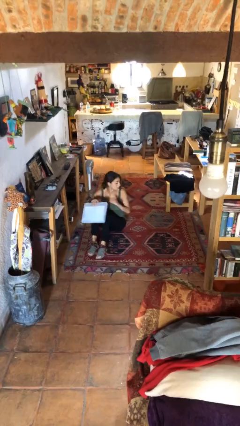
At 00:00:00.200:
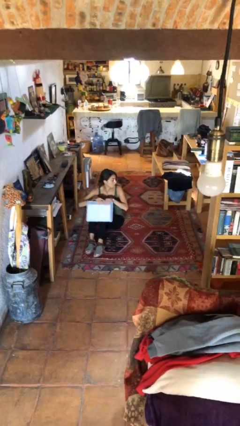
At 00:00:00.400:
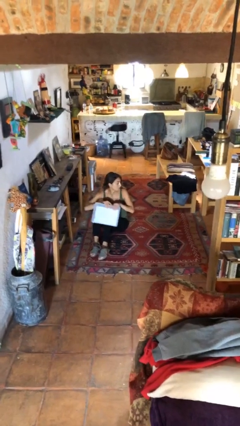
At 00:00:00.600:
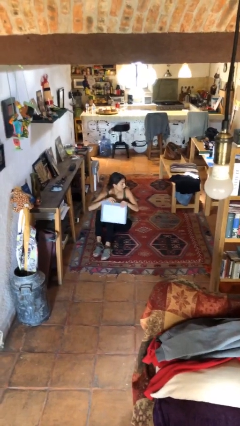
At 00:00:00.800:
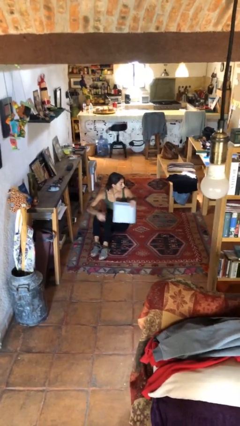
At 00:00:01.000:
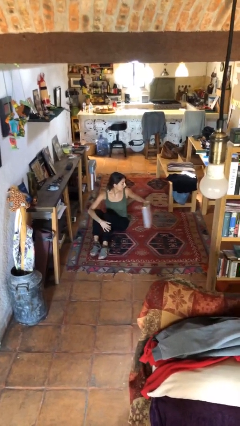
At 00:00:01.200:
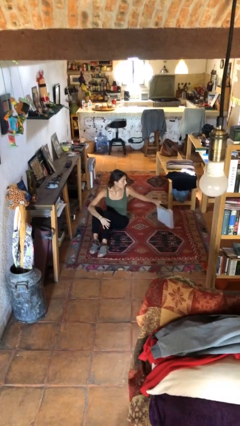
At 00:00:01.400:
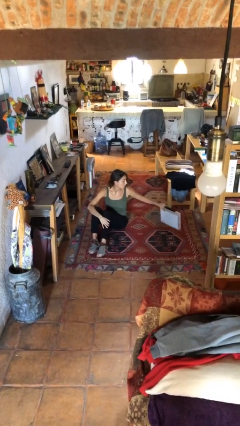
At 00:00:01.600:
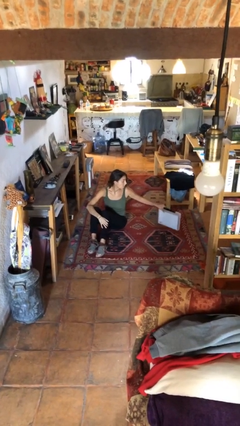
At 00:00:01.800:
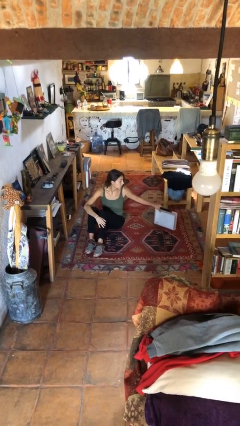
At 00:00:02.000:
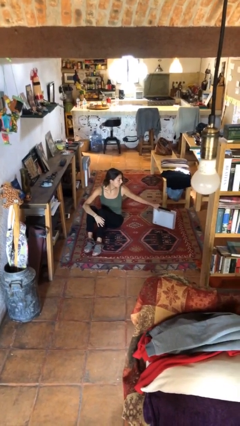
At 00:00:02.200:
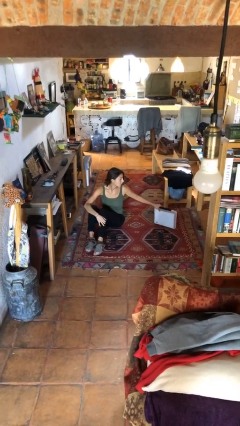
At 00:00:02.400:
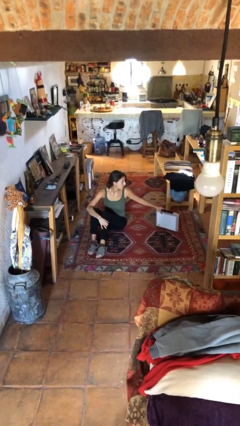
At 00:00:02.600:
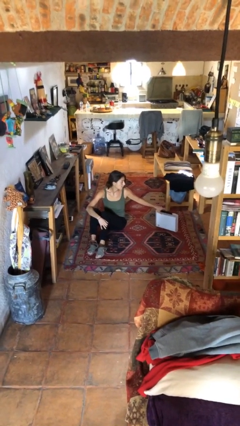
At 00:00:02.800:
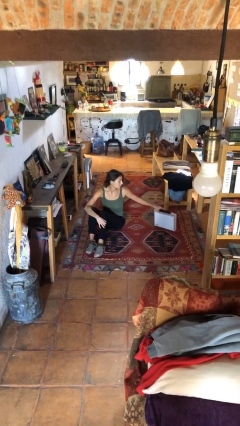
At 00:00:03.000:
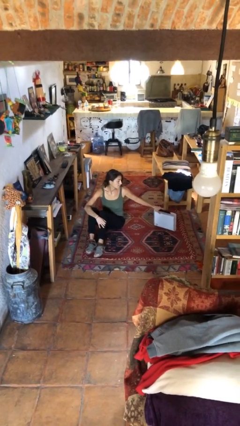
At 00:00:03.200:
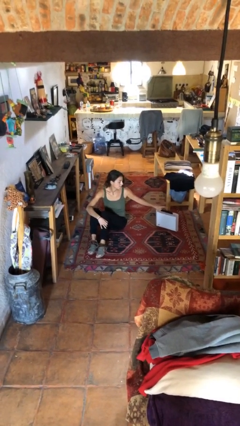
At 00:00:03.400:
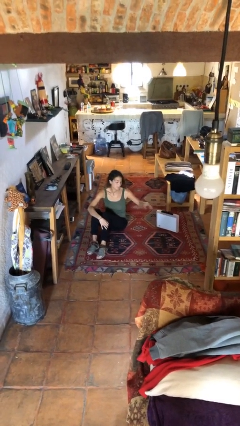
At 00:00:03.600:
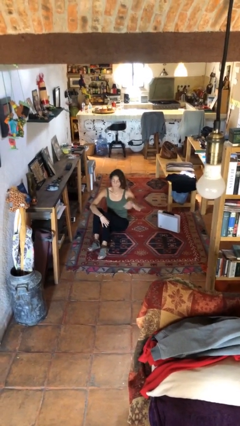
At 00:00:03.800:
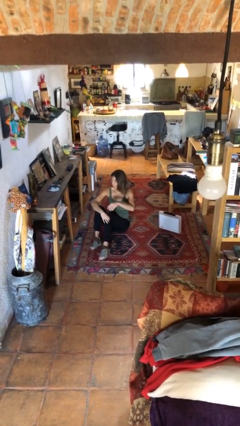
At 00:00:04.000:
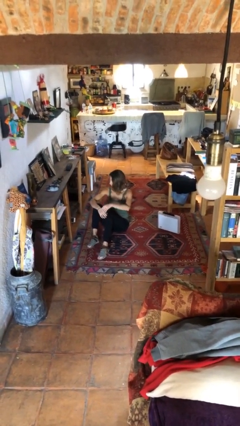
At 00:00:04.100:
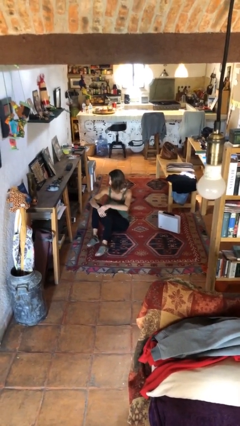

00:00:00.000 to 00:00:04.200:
person puts down object on floor

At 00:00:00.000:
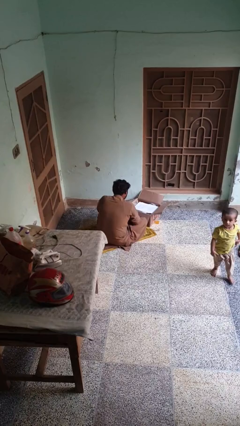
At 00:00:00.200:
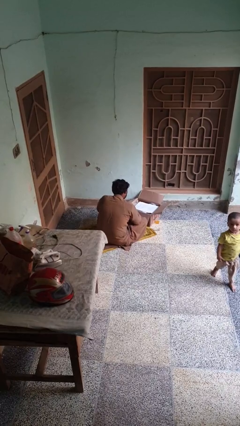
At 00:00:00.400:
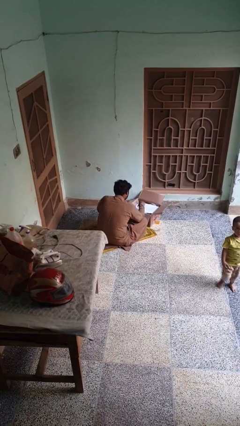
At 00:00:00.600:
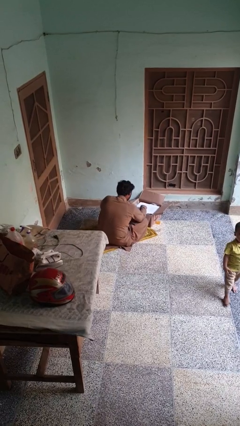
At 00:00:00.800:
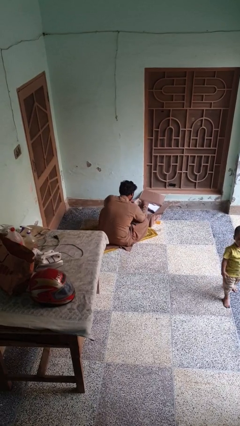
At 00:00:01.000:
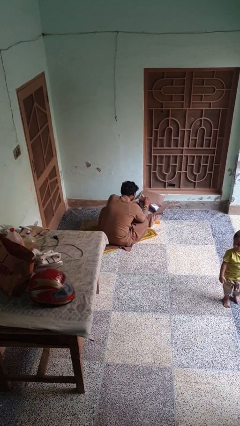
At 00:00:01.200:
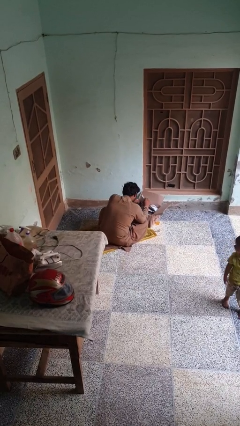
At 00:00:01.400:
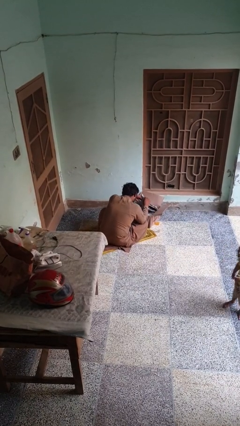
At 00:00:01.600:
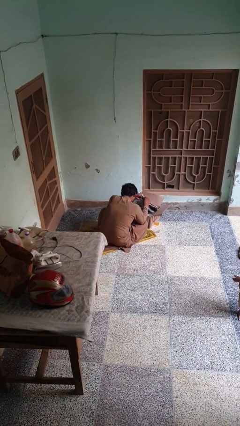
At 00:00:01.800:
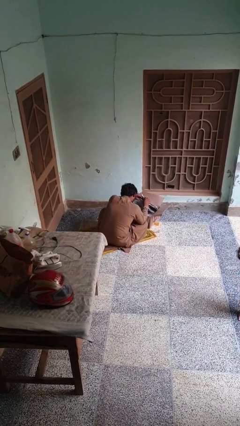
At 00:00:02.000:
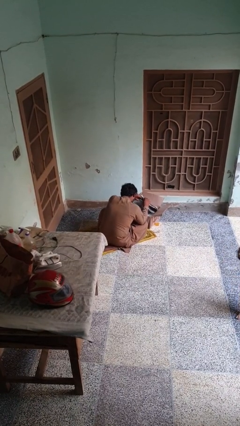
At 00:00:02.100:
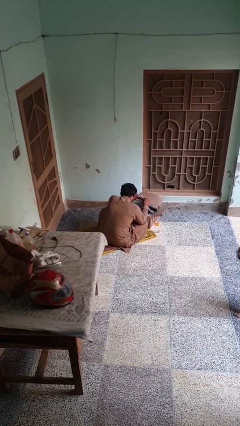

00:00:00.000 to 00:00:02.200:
person searches in box

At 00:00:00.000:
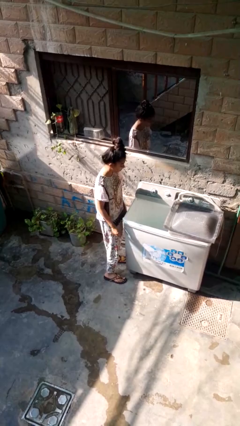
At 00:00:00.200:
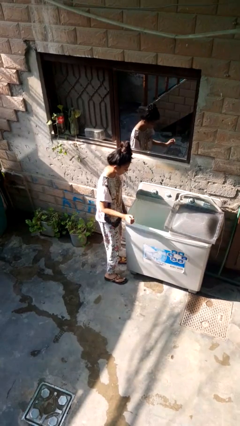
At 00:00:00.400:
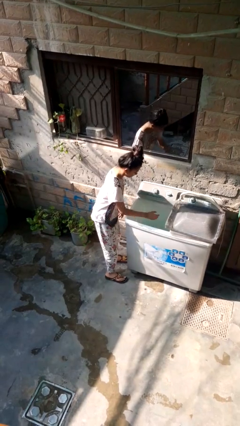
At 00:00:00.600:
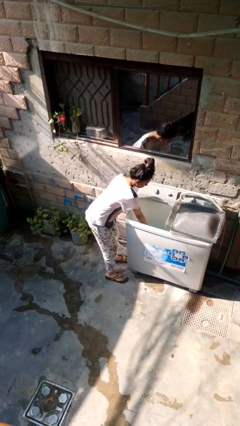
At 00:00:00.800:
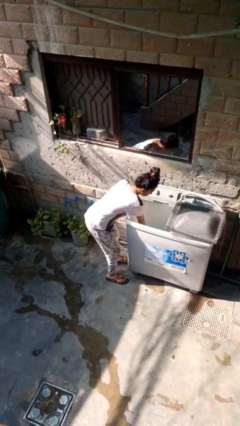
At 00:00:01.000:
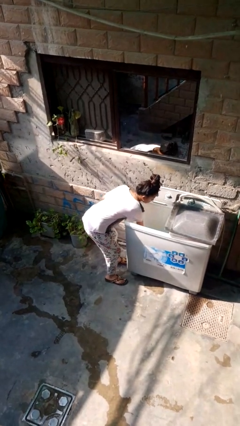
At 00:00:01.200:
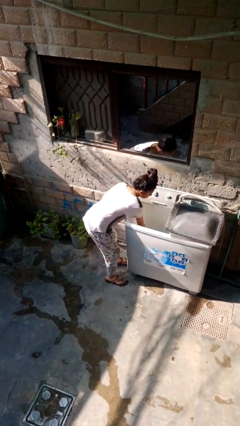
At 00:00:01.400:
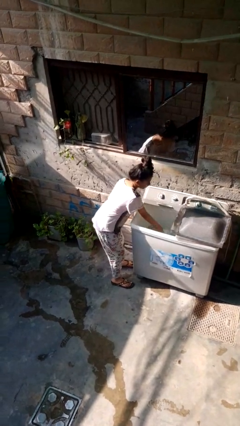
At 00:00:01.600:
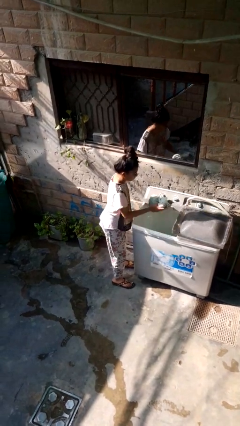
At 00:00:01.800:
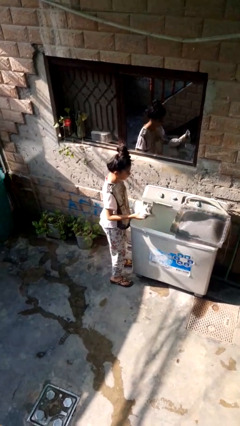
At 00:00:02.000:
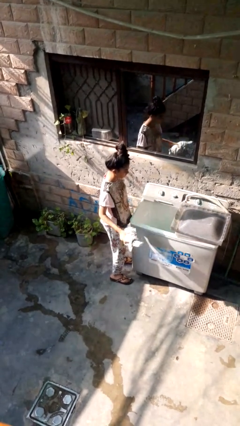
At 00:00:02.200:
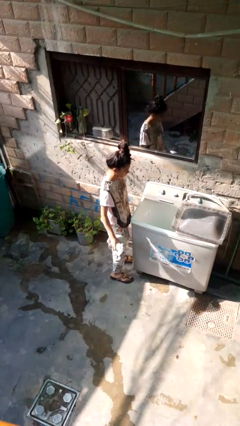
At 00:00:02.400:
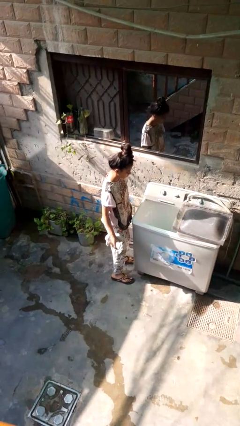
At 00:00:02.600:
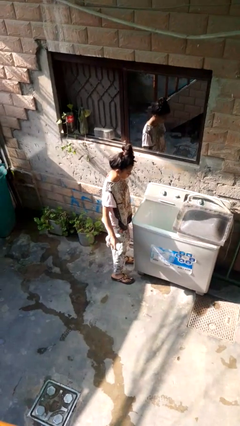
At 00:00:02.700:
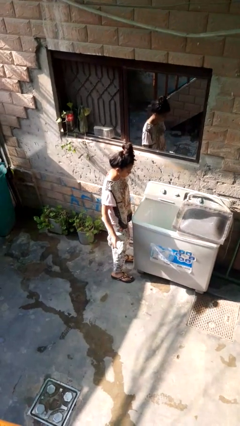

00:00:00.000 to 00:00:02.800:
person unloads clotheswasher

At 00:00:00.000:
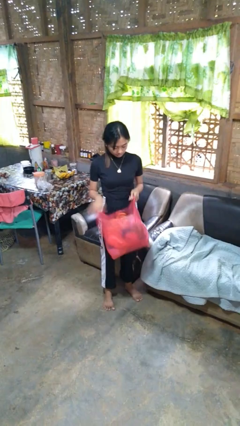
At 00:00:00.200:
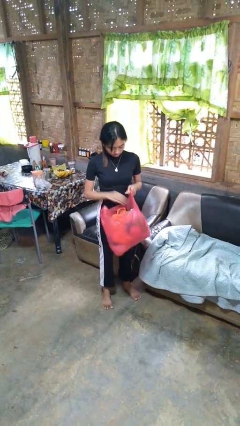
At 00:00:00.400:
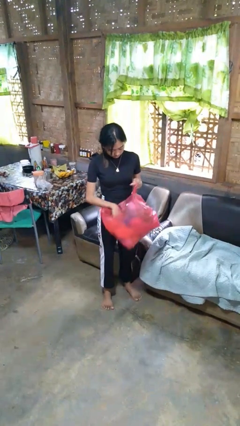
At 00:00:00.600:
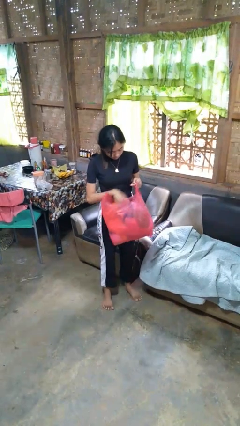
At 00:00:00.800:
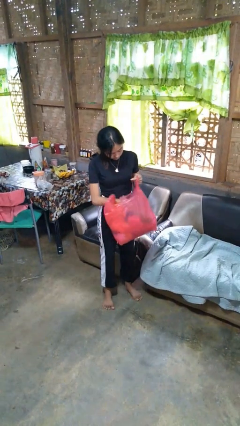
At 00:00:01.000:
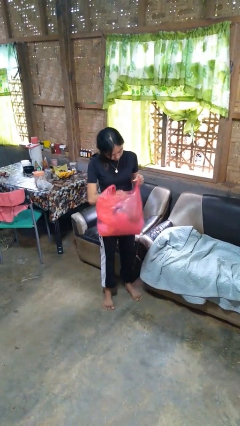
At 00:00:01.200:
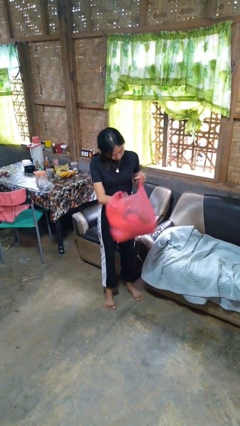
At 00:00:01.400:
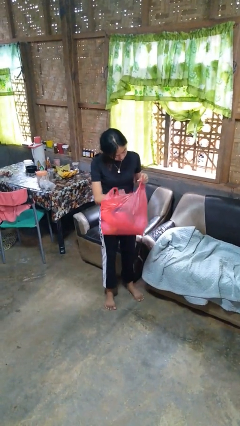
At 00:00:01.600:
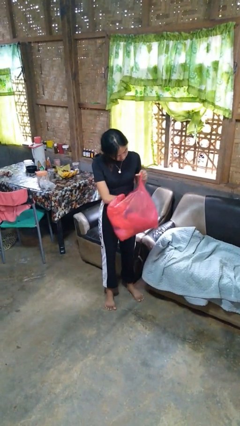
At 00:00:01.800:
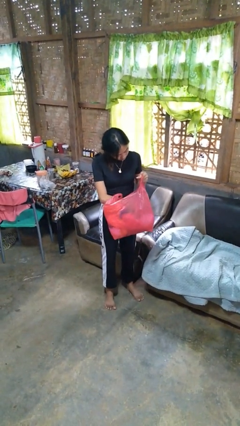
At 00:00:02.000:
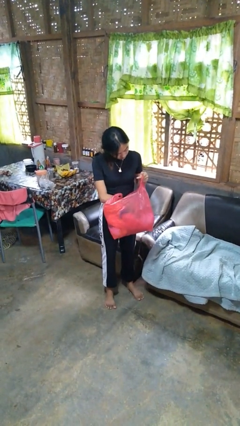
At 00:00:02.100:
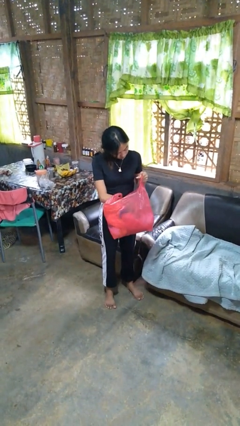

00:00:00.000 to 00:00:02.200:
person searches in bag

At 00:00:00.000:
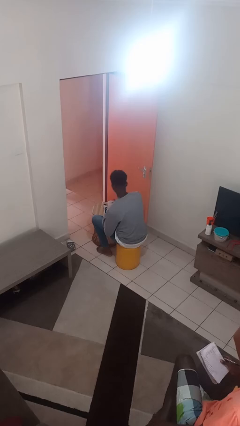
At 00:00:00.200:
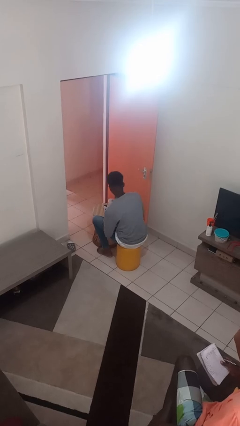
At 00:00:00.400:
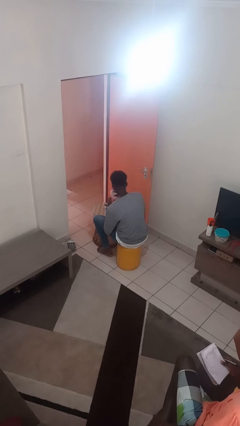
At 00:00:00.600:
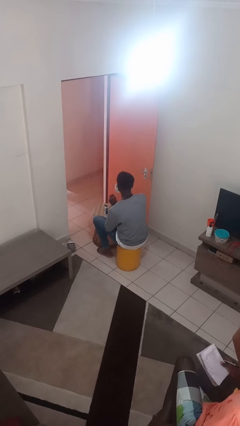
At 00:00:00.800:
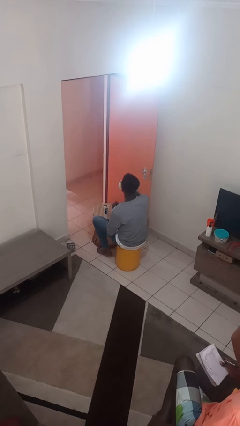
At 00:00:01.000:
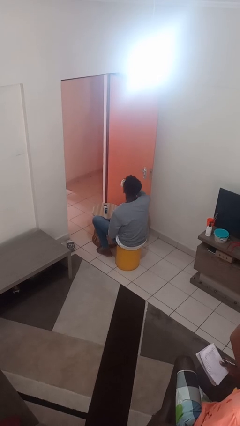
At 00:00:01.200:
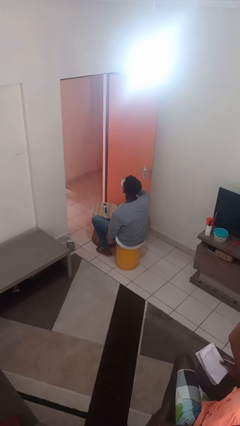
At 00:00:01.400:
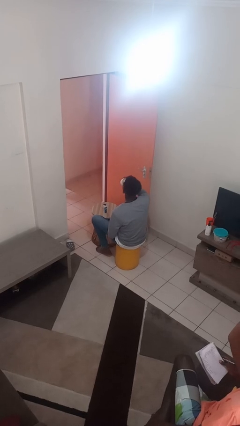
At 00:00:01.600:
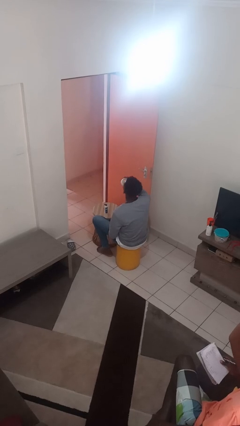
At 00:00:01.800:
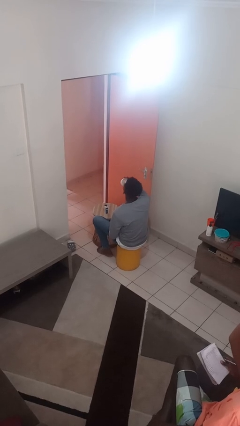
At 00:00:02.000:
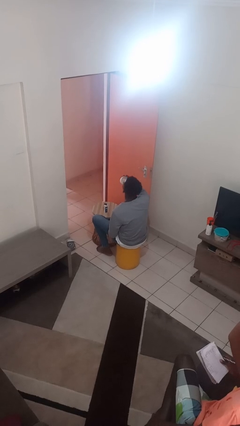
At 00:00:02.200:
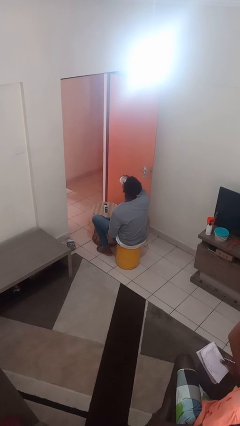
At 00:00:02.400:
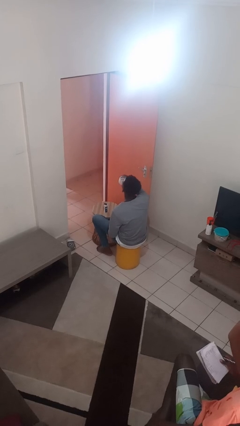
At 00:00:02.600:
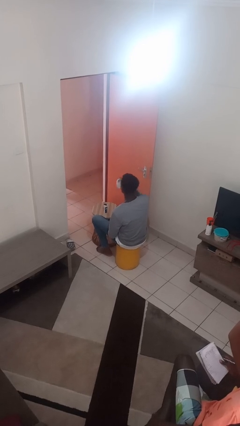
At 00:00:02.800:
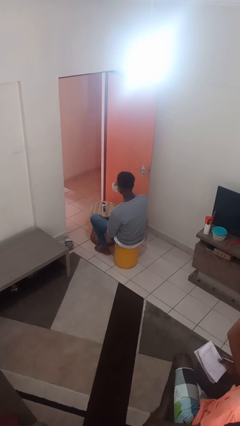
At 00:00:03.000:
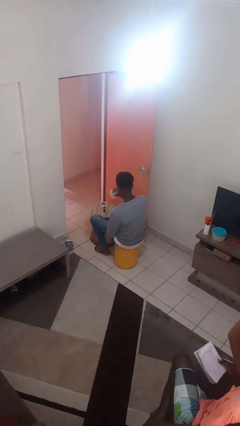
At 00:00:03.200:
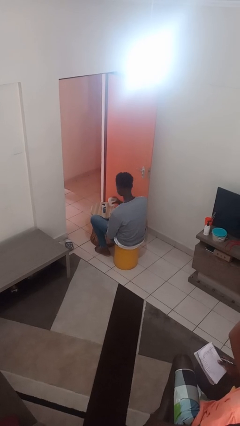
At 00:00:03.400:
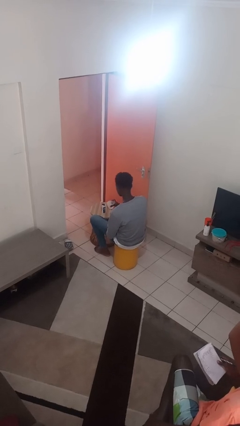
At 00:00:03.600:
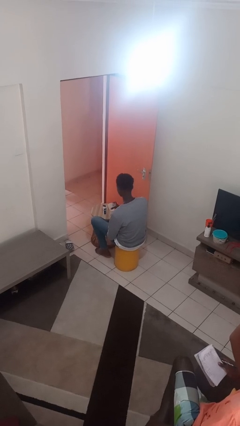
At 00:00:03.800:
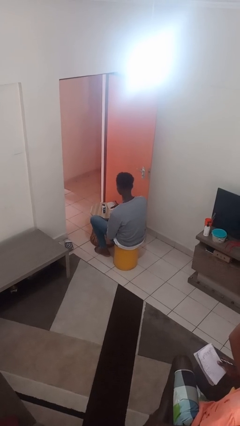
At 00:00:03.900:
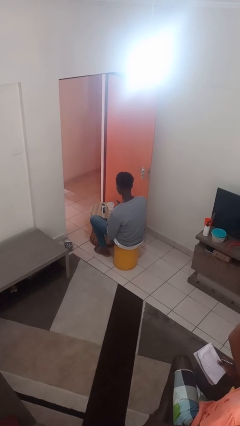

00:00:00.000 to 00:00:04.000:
person drinks from cup

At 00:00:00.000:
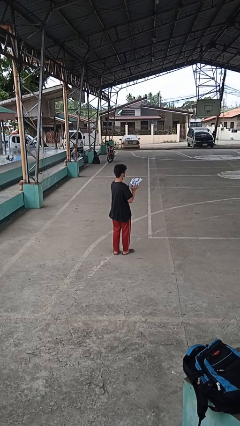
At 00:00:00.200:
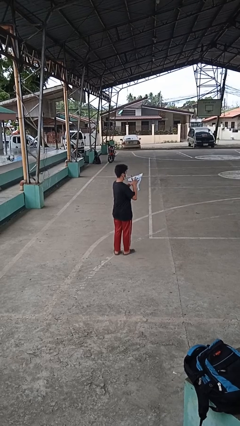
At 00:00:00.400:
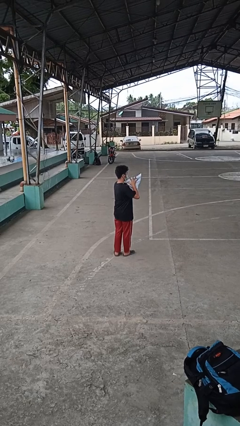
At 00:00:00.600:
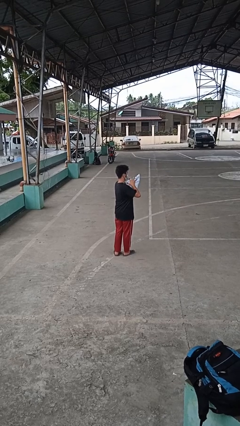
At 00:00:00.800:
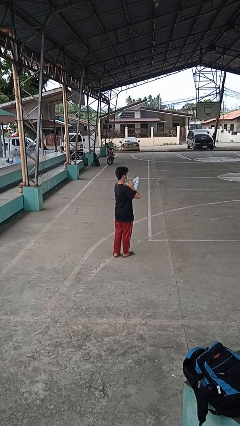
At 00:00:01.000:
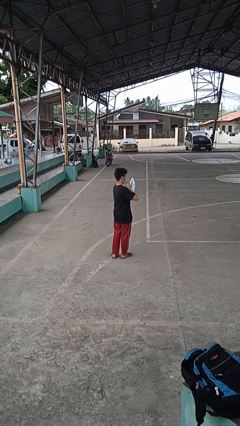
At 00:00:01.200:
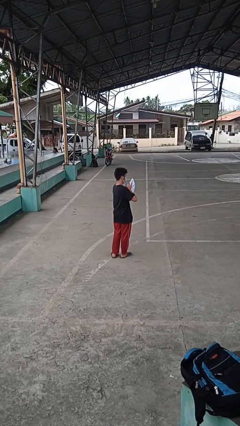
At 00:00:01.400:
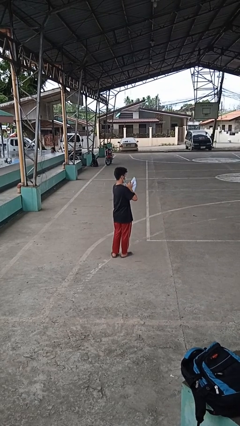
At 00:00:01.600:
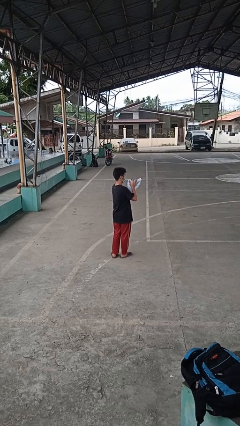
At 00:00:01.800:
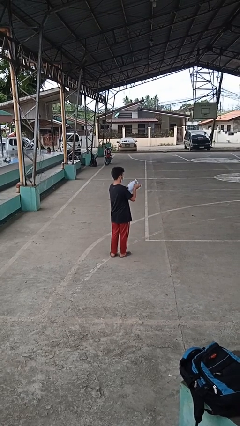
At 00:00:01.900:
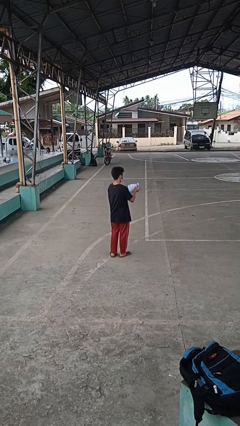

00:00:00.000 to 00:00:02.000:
person squeezes object
